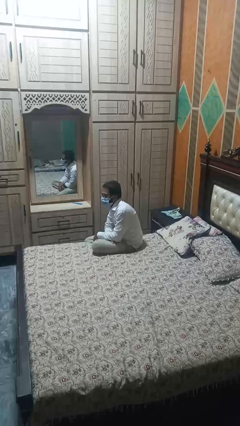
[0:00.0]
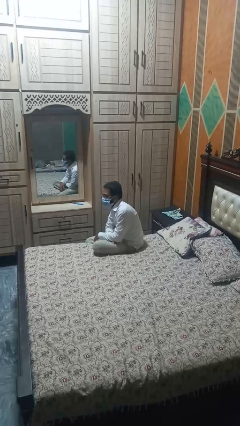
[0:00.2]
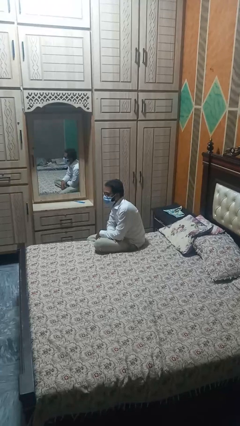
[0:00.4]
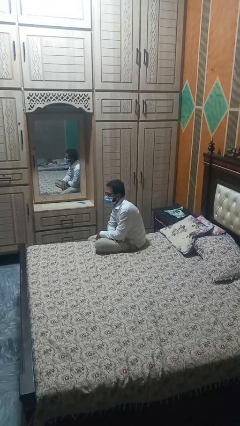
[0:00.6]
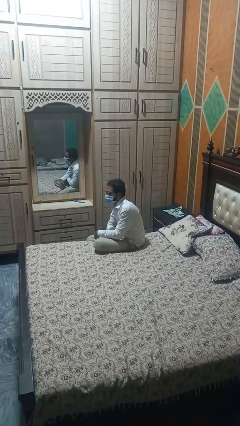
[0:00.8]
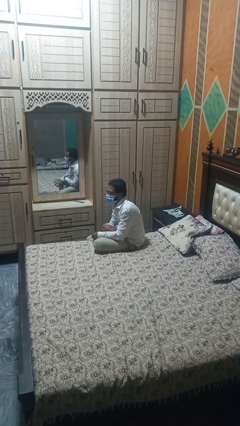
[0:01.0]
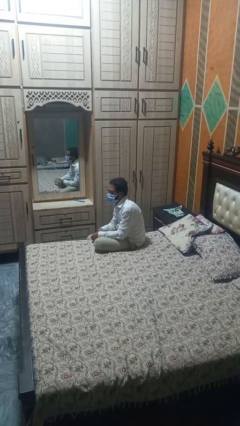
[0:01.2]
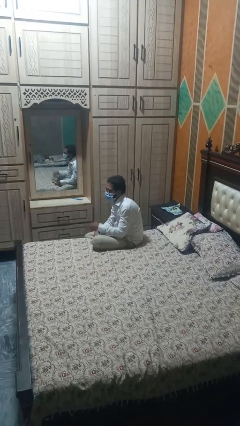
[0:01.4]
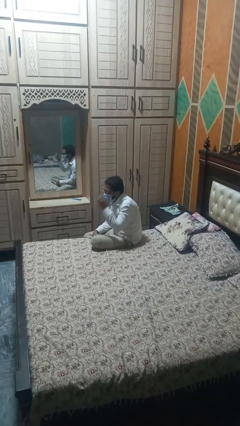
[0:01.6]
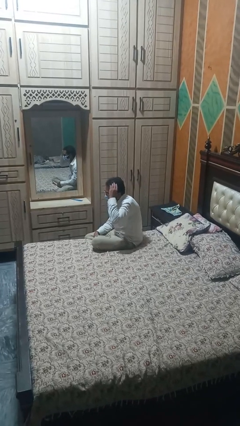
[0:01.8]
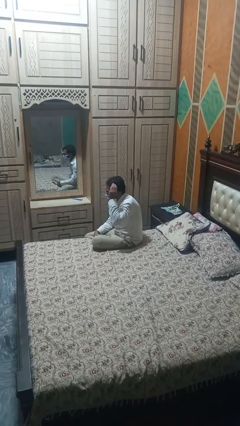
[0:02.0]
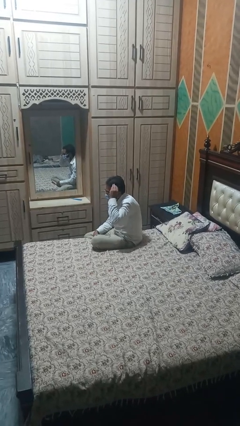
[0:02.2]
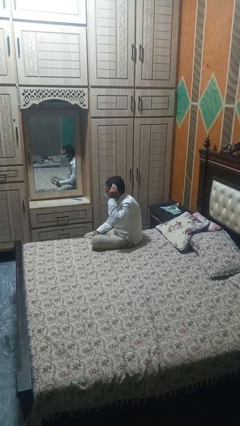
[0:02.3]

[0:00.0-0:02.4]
person strokes hair

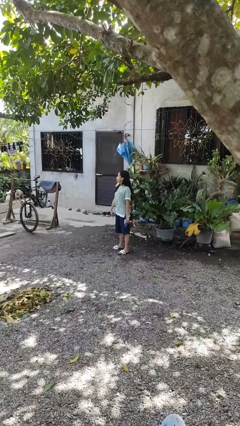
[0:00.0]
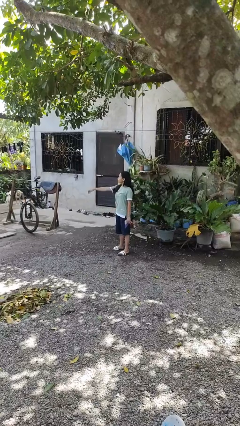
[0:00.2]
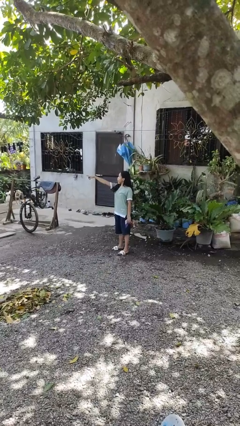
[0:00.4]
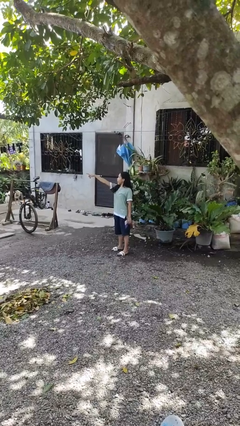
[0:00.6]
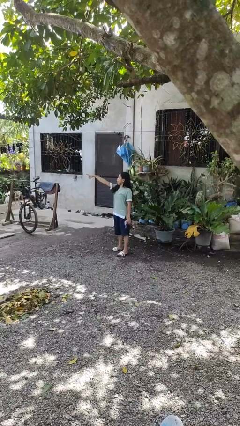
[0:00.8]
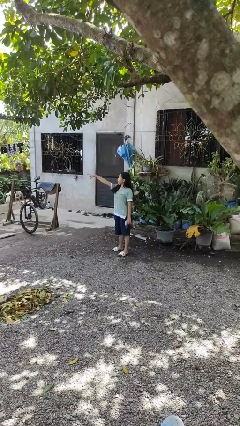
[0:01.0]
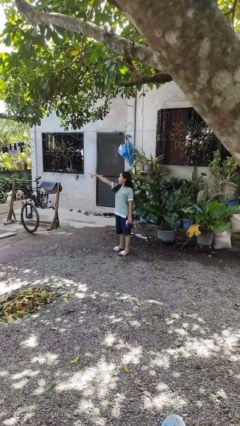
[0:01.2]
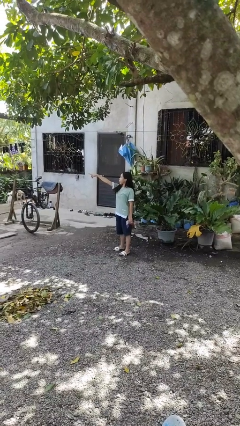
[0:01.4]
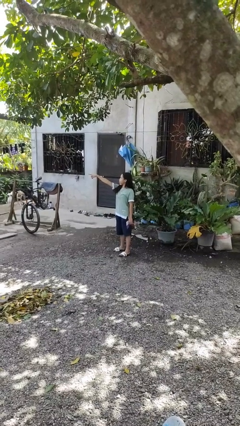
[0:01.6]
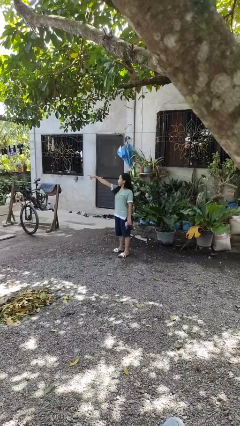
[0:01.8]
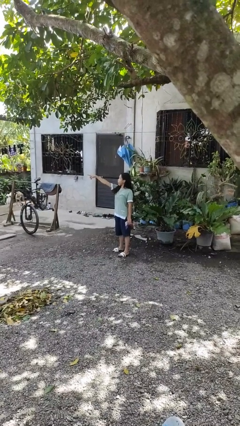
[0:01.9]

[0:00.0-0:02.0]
person points at person

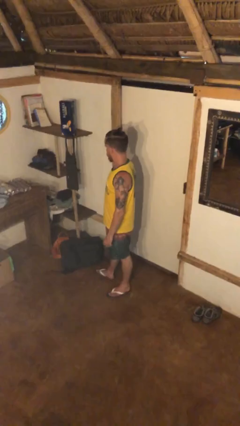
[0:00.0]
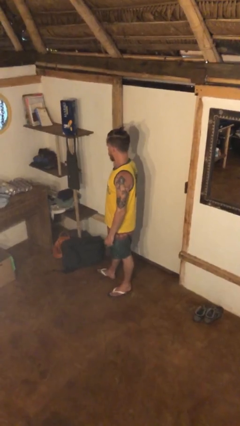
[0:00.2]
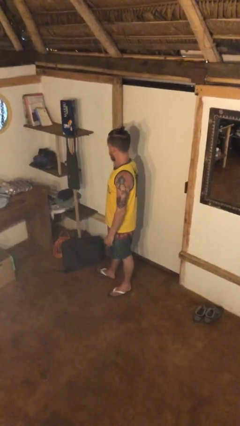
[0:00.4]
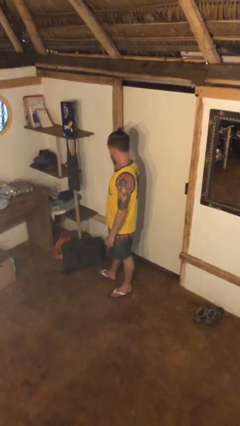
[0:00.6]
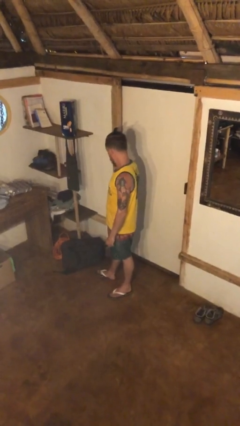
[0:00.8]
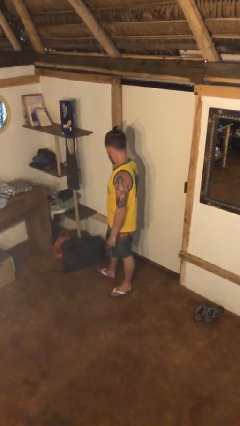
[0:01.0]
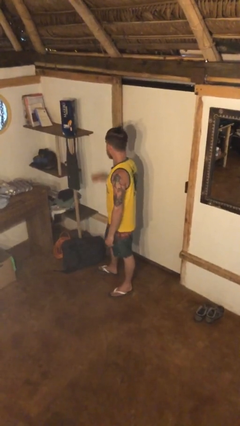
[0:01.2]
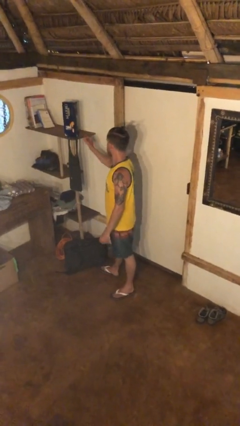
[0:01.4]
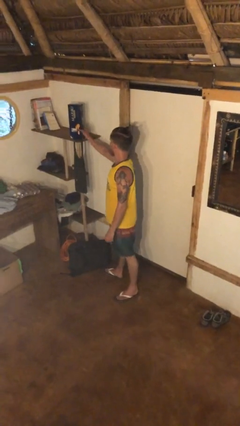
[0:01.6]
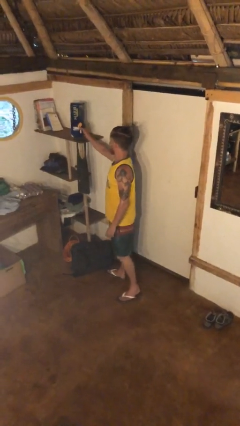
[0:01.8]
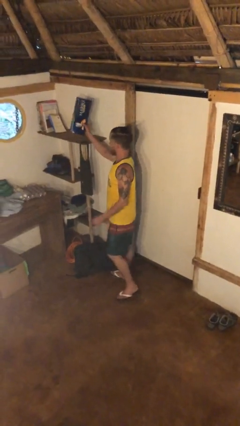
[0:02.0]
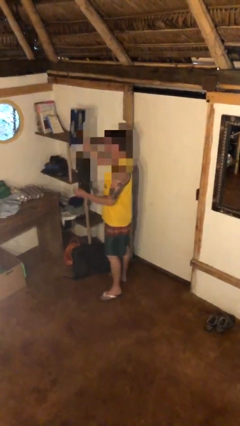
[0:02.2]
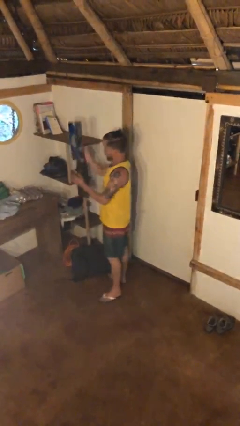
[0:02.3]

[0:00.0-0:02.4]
person picks up object from shelf

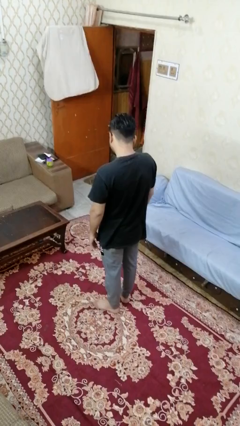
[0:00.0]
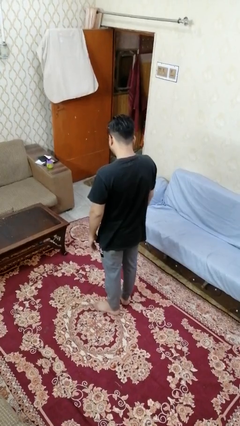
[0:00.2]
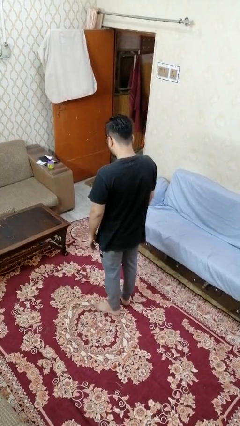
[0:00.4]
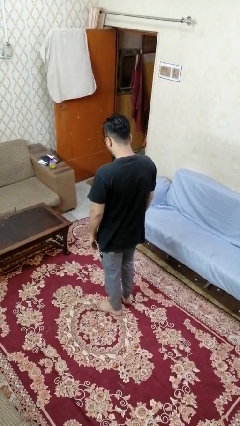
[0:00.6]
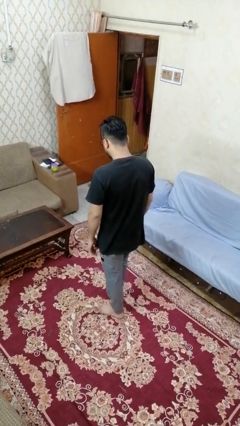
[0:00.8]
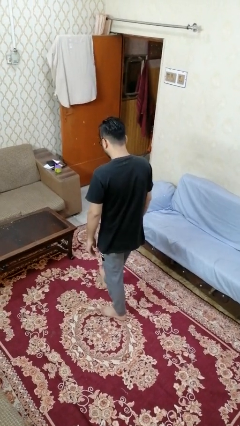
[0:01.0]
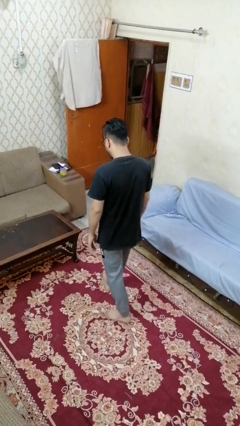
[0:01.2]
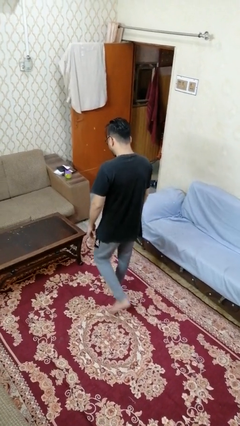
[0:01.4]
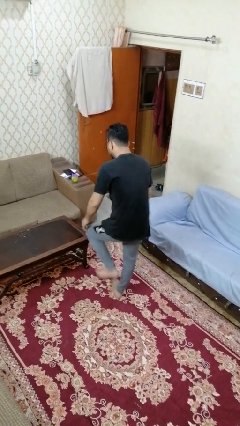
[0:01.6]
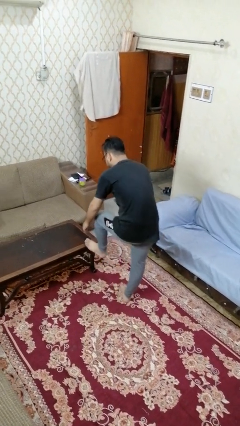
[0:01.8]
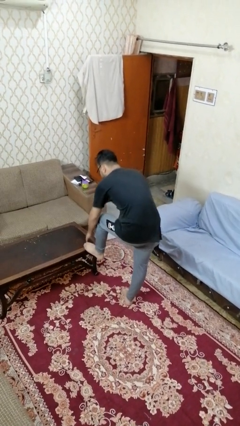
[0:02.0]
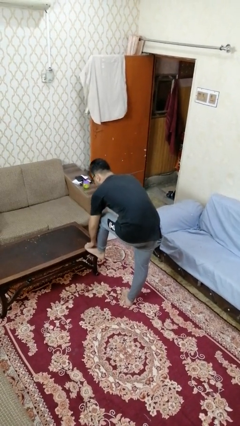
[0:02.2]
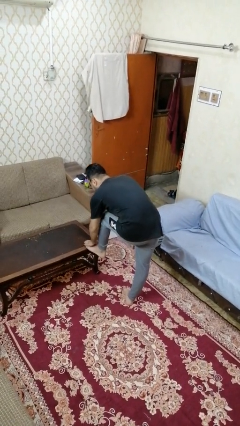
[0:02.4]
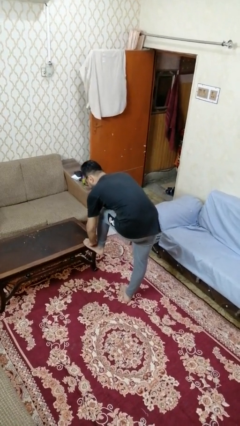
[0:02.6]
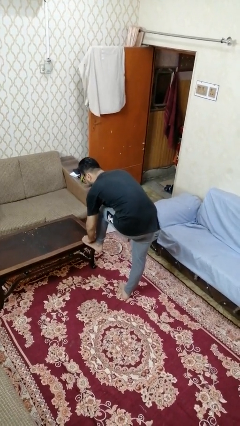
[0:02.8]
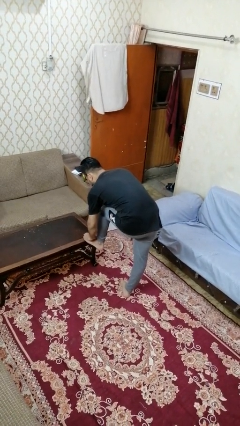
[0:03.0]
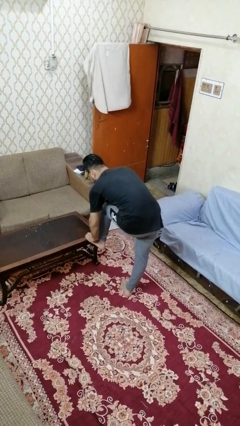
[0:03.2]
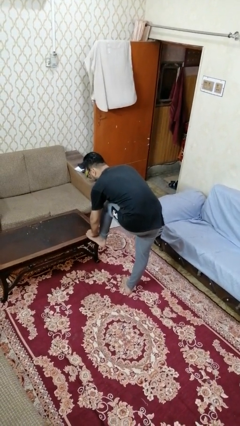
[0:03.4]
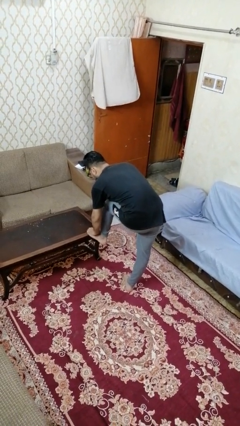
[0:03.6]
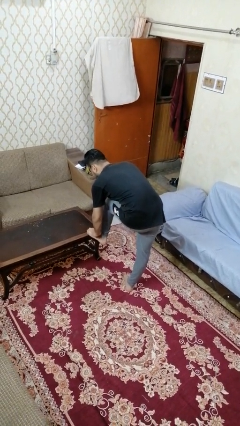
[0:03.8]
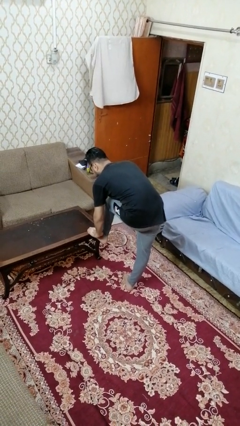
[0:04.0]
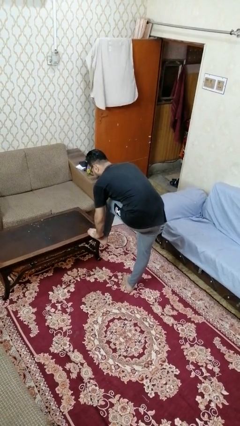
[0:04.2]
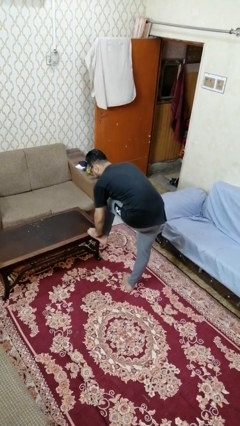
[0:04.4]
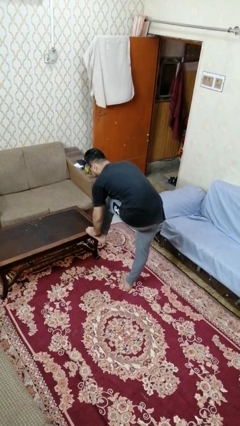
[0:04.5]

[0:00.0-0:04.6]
person stubs toe

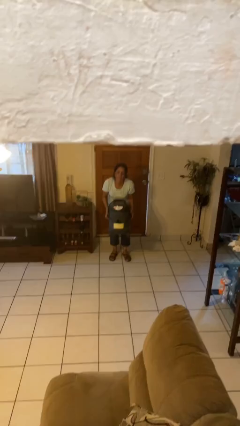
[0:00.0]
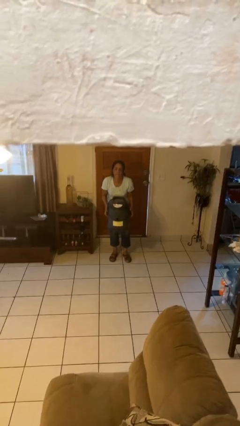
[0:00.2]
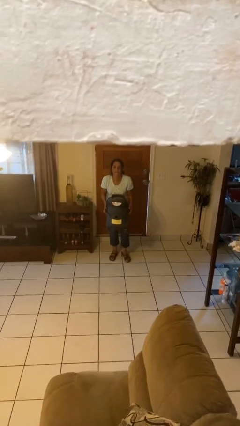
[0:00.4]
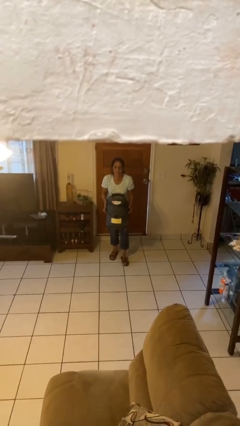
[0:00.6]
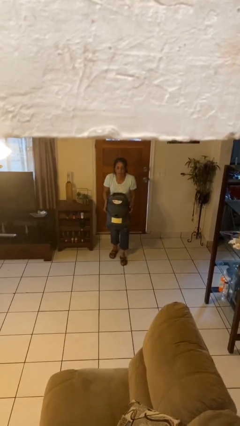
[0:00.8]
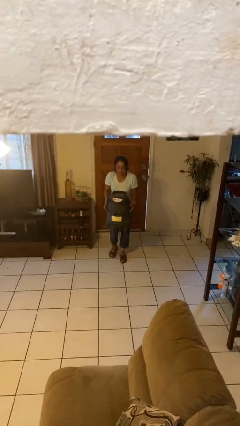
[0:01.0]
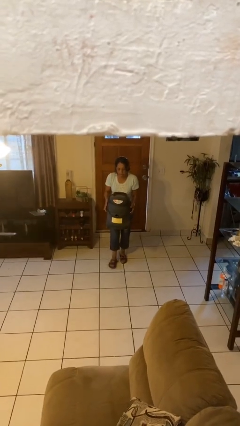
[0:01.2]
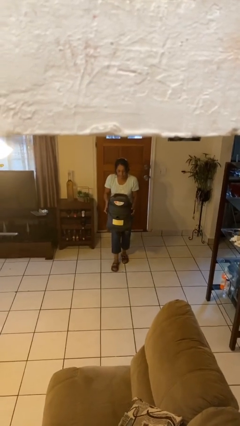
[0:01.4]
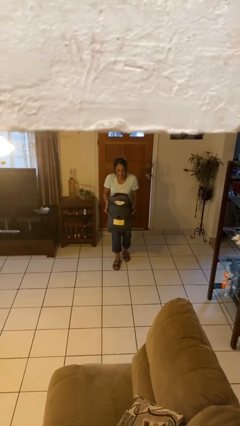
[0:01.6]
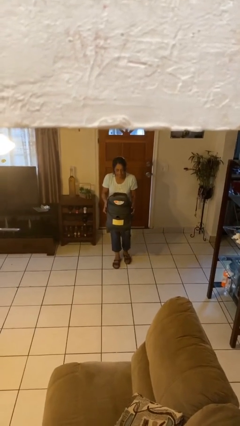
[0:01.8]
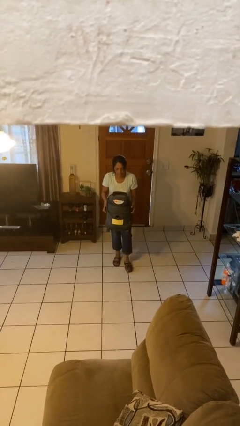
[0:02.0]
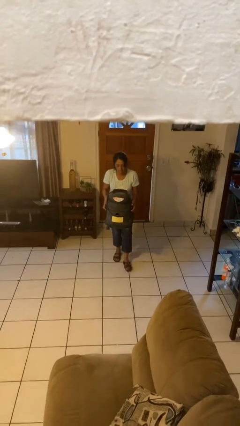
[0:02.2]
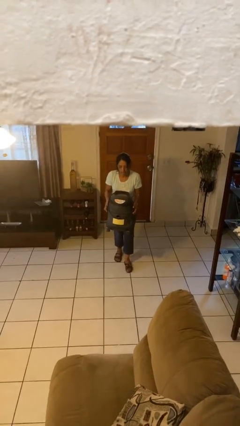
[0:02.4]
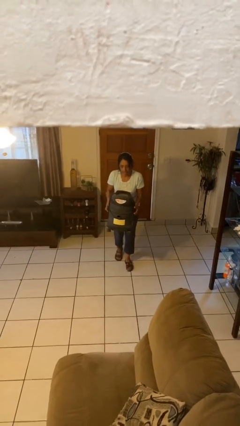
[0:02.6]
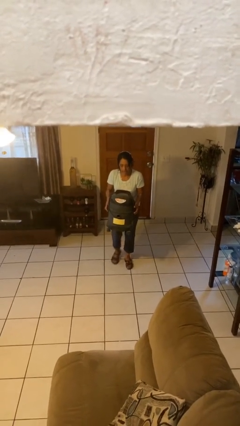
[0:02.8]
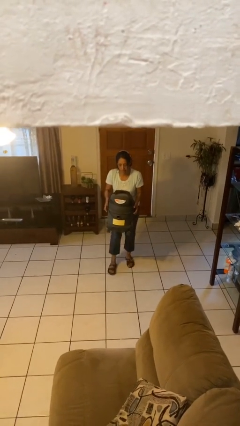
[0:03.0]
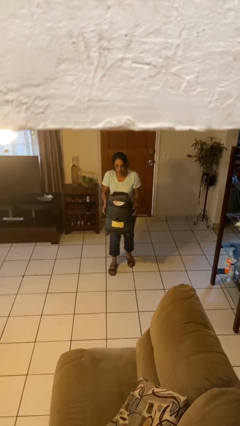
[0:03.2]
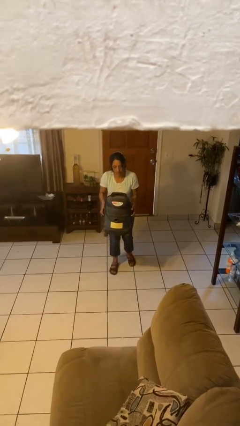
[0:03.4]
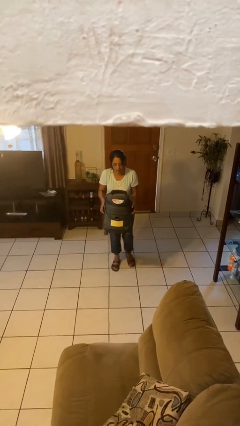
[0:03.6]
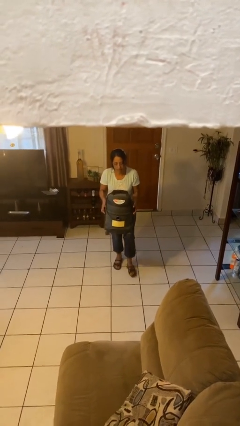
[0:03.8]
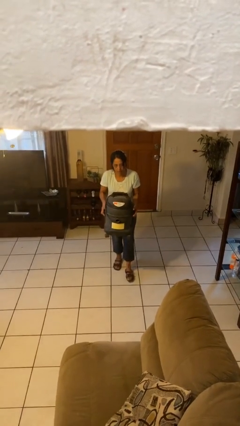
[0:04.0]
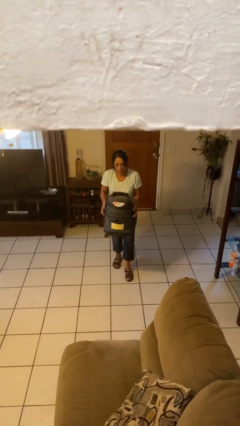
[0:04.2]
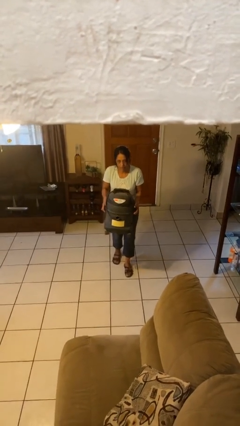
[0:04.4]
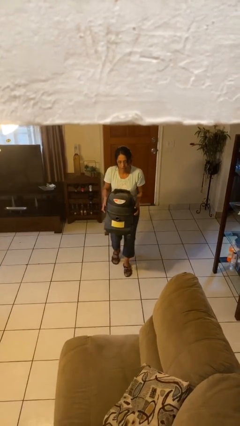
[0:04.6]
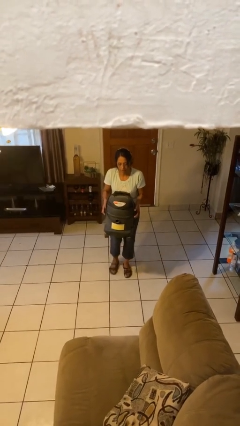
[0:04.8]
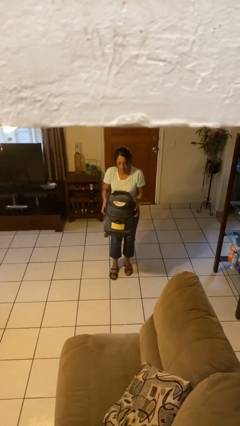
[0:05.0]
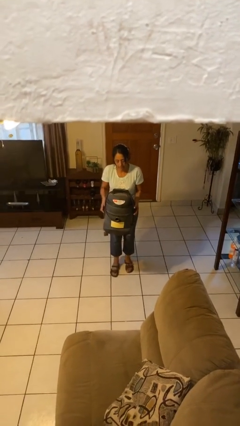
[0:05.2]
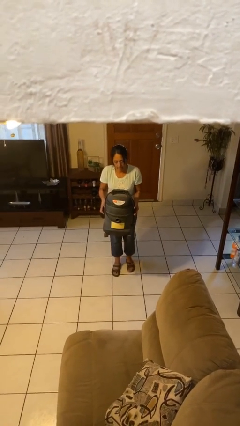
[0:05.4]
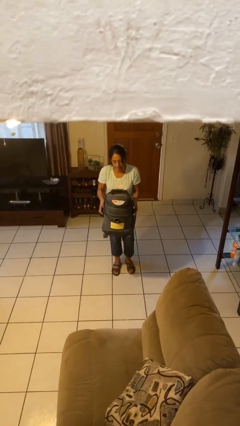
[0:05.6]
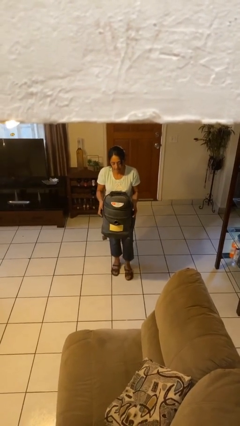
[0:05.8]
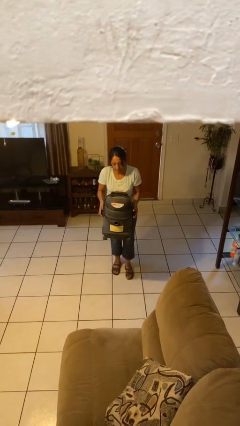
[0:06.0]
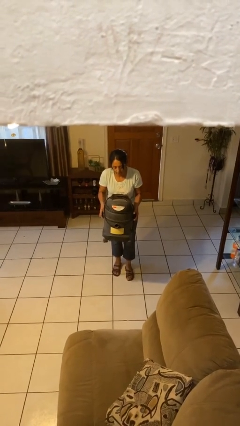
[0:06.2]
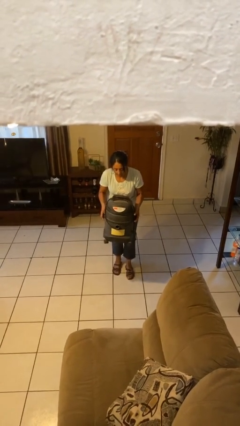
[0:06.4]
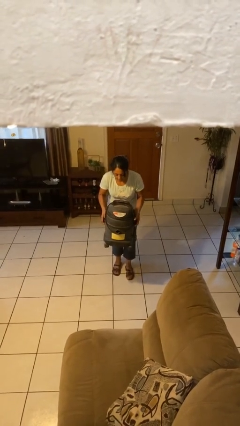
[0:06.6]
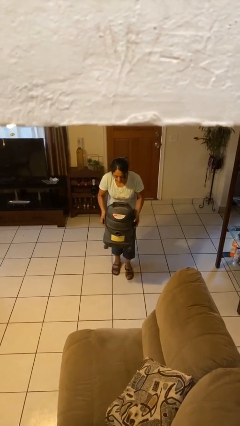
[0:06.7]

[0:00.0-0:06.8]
person carries heavy object
